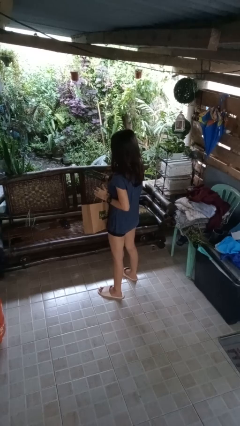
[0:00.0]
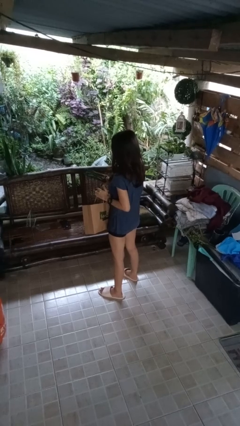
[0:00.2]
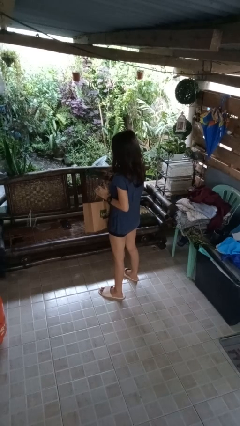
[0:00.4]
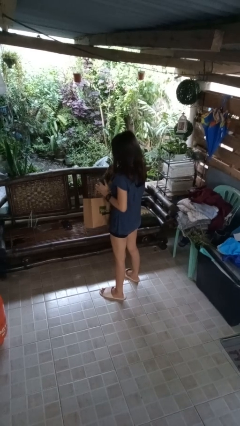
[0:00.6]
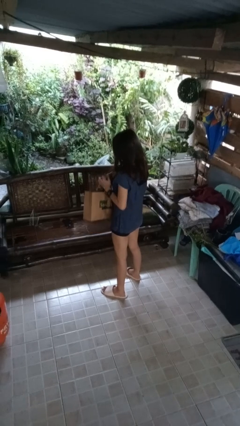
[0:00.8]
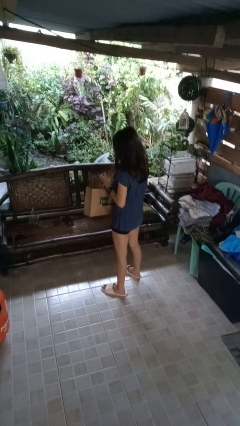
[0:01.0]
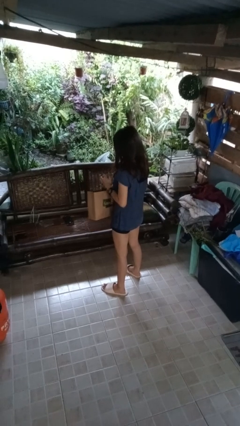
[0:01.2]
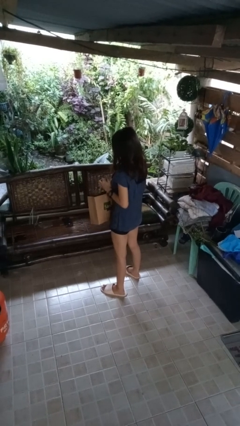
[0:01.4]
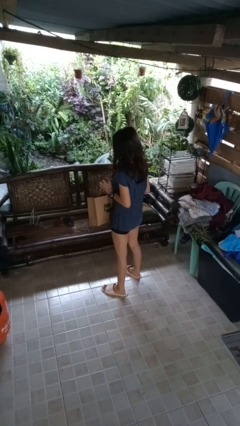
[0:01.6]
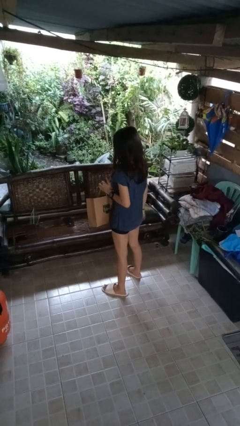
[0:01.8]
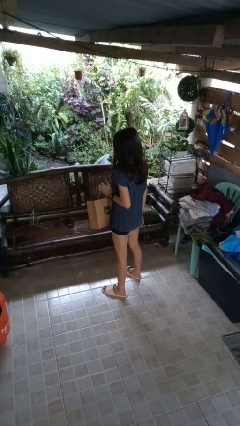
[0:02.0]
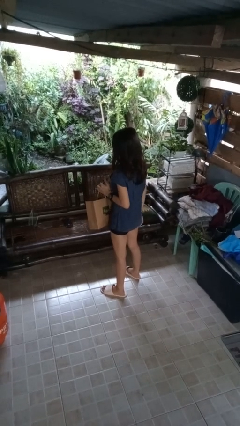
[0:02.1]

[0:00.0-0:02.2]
person puts object into bag

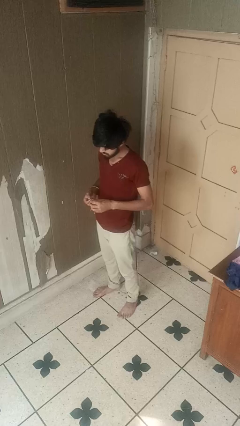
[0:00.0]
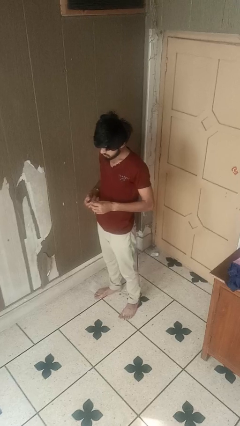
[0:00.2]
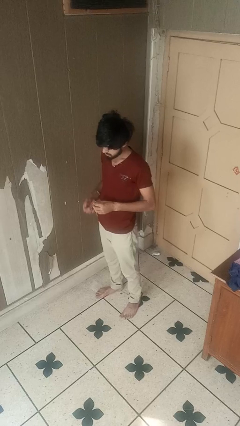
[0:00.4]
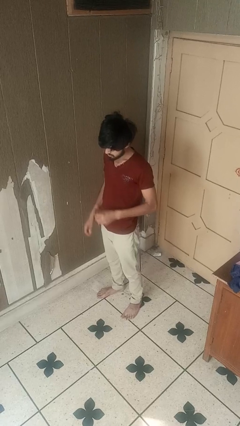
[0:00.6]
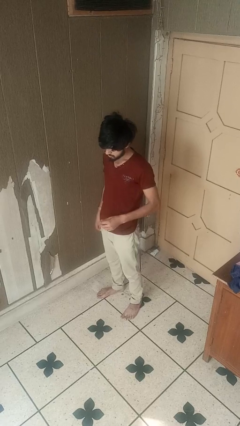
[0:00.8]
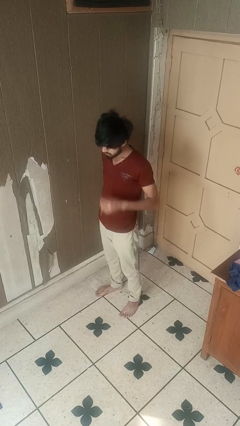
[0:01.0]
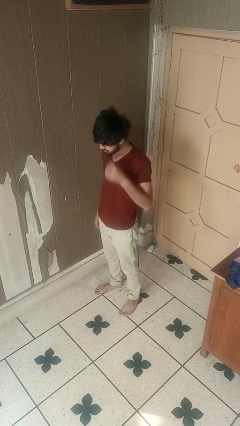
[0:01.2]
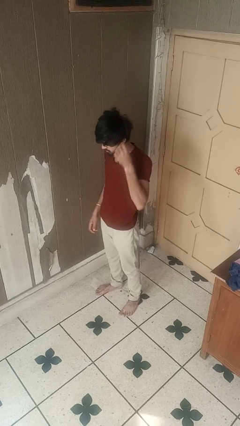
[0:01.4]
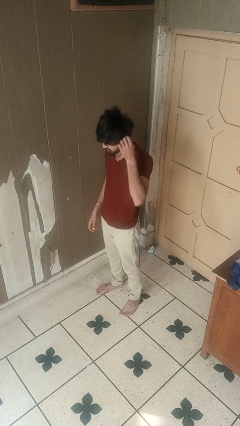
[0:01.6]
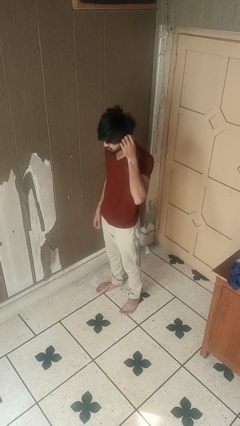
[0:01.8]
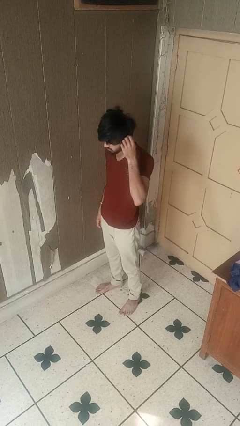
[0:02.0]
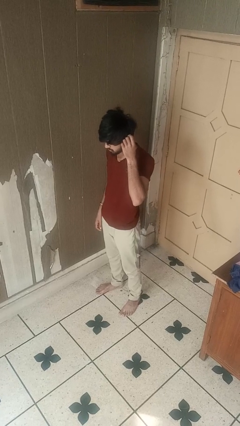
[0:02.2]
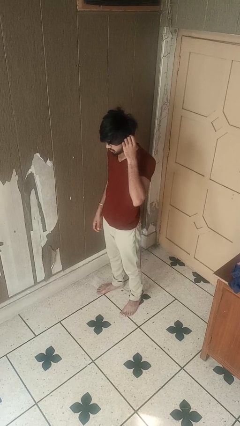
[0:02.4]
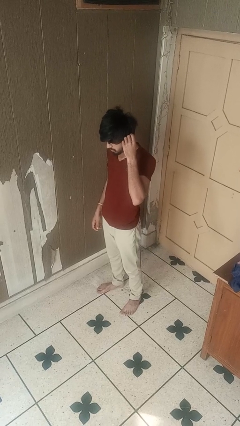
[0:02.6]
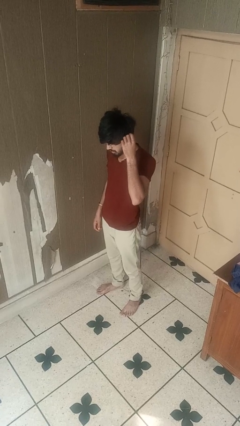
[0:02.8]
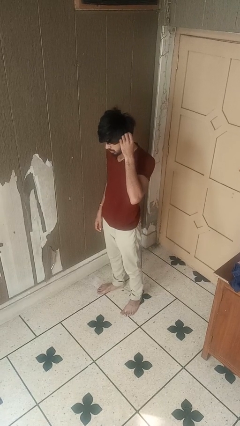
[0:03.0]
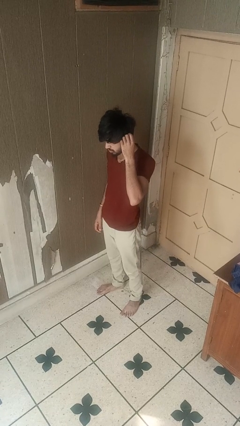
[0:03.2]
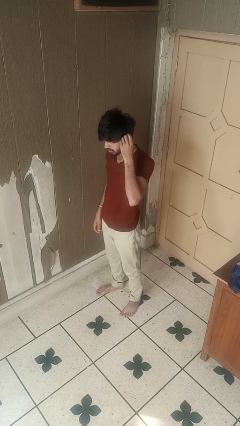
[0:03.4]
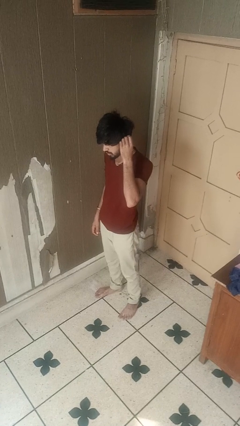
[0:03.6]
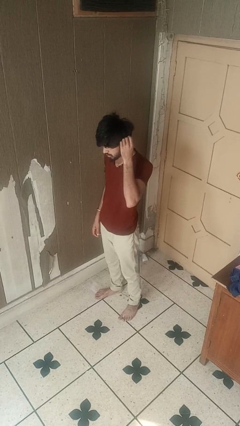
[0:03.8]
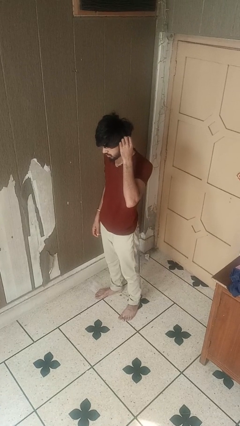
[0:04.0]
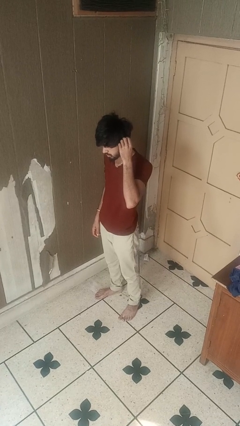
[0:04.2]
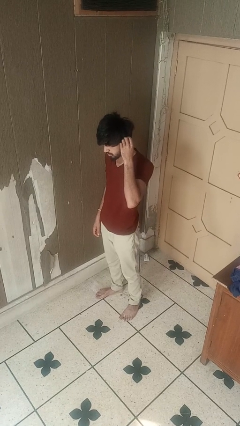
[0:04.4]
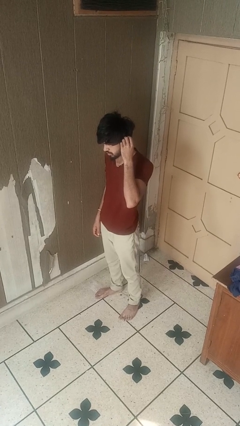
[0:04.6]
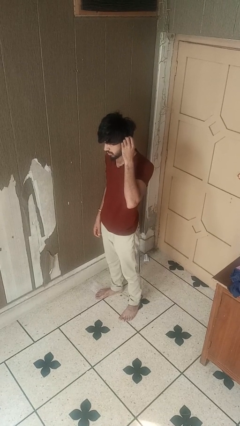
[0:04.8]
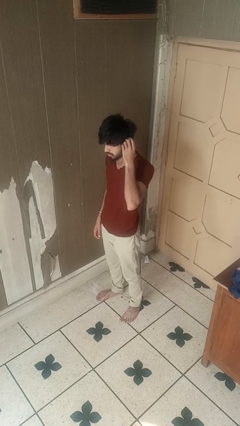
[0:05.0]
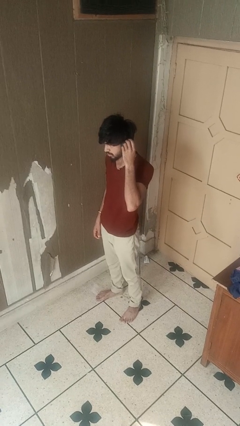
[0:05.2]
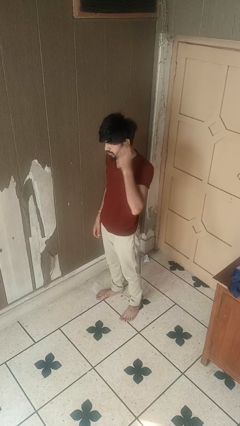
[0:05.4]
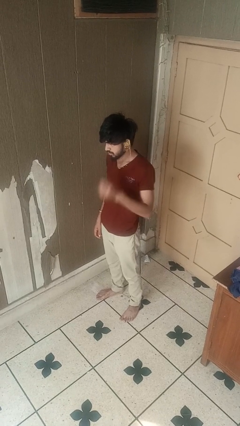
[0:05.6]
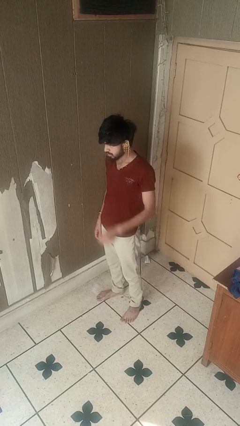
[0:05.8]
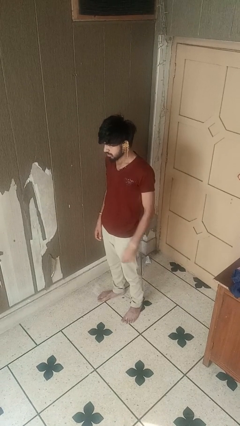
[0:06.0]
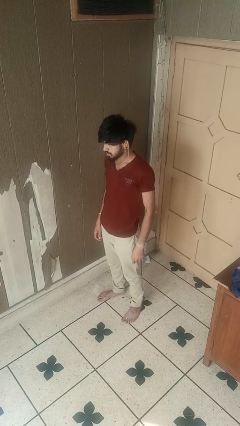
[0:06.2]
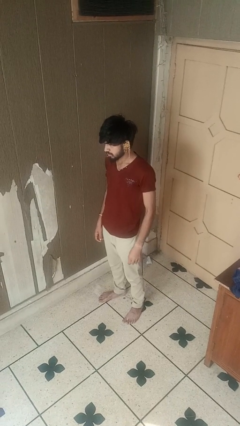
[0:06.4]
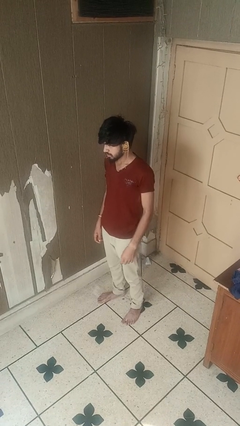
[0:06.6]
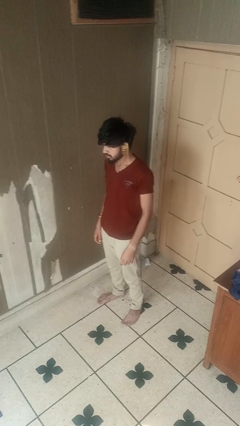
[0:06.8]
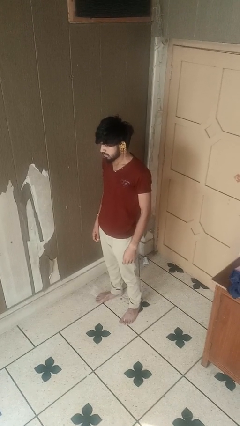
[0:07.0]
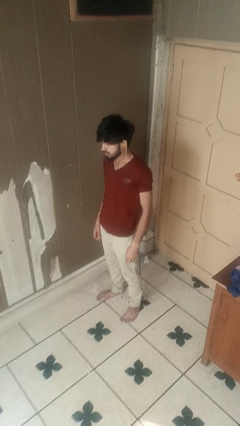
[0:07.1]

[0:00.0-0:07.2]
person puts on earrings

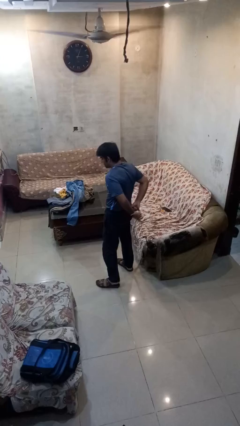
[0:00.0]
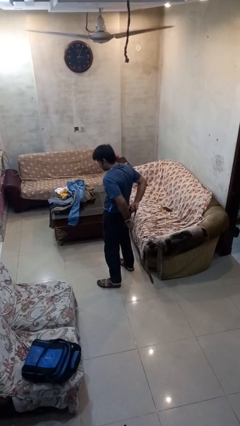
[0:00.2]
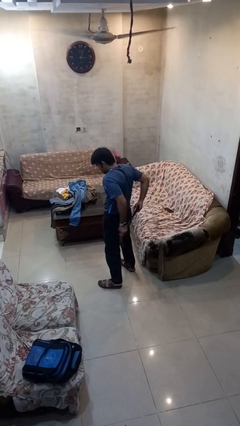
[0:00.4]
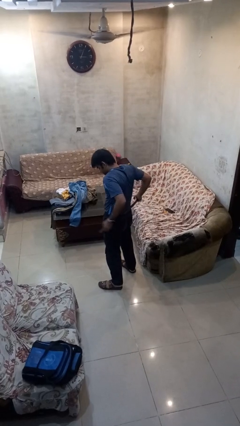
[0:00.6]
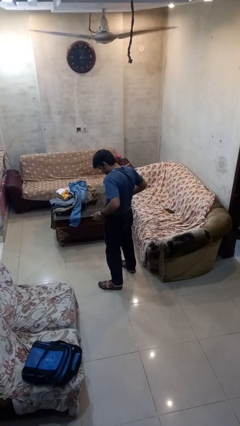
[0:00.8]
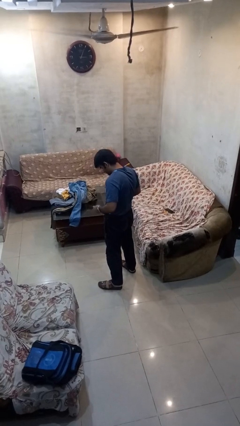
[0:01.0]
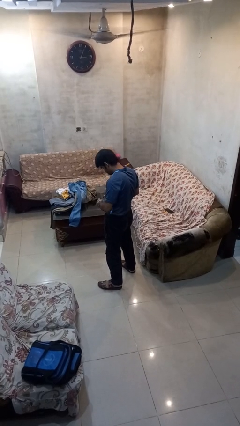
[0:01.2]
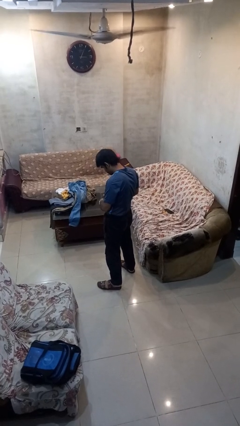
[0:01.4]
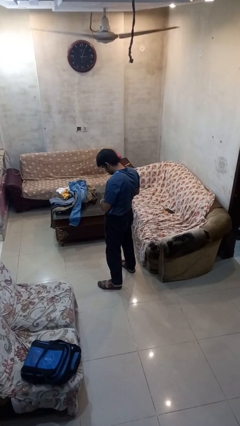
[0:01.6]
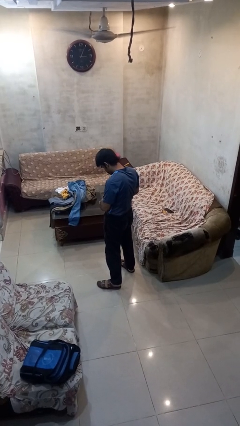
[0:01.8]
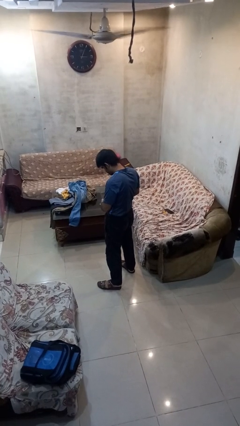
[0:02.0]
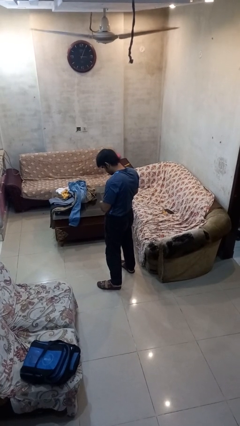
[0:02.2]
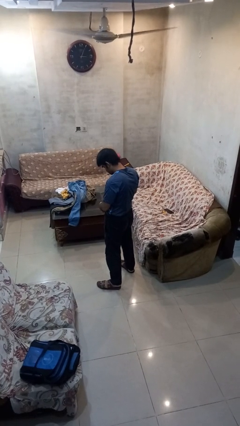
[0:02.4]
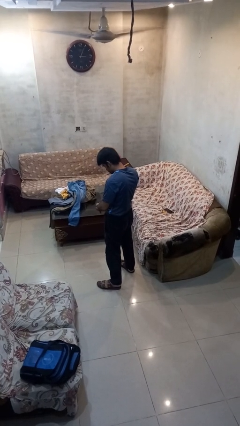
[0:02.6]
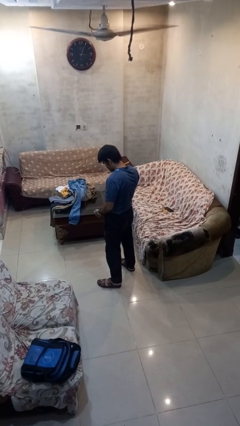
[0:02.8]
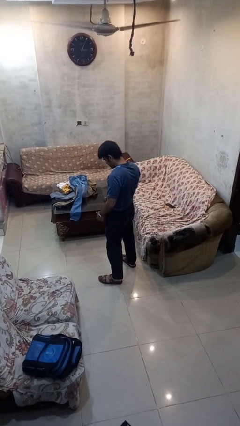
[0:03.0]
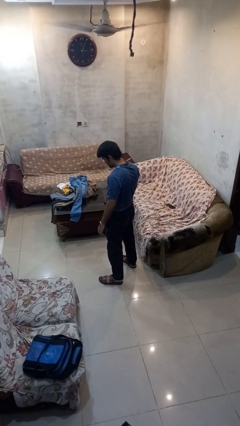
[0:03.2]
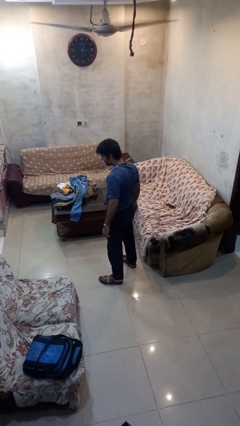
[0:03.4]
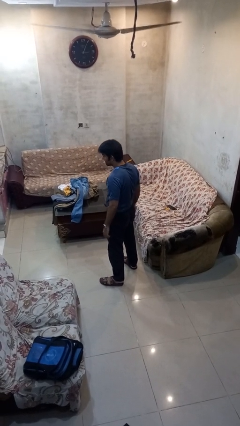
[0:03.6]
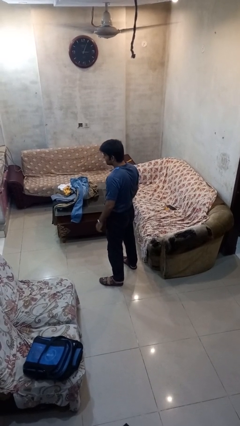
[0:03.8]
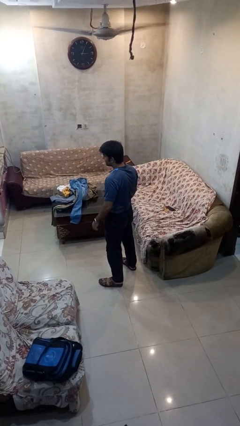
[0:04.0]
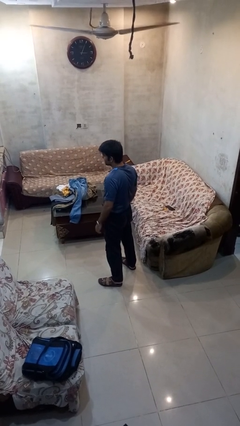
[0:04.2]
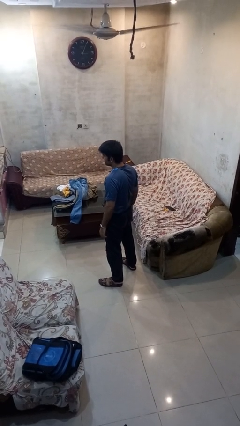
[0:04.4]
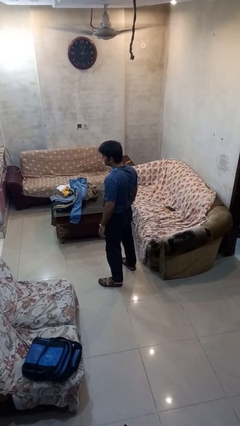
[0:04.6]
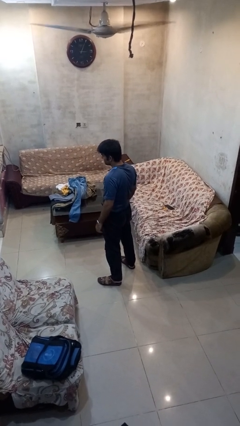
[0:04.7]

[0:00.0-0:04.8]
person puts on belt

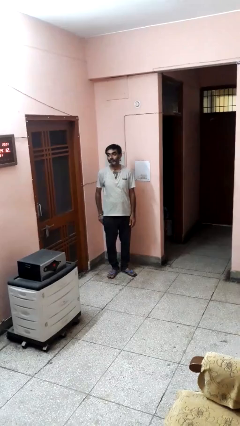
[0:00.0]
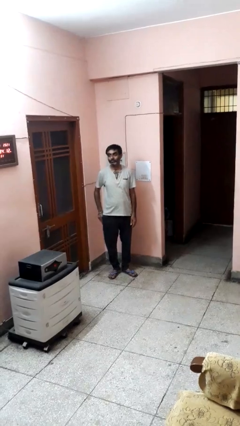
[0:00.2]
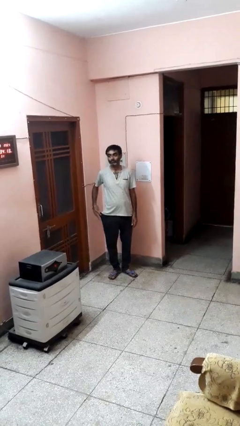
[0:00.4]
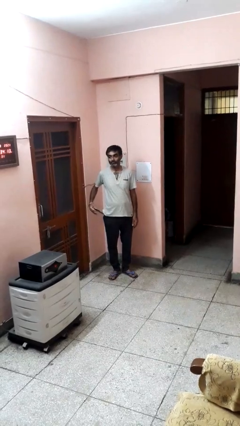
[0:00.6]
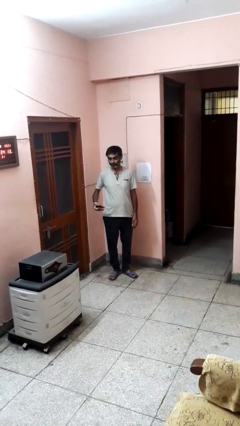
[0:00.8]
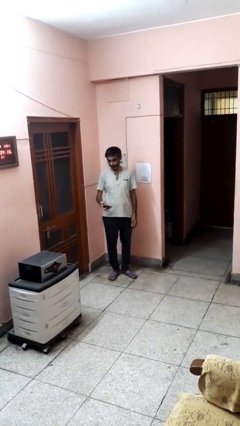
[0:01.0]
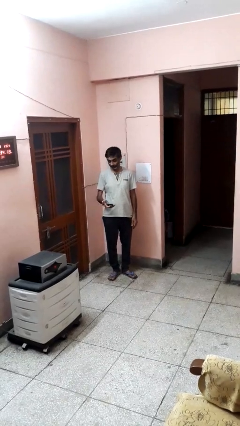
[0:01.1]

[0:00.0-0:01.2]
person takes phone from pocket

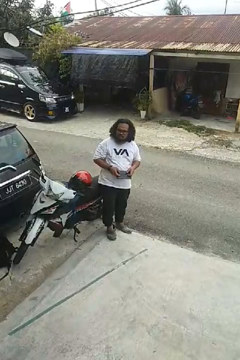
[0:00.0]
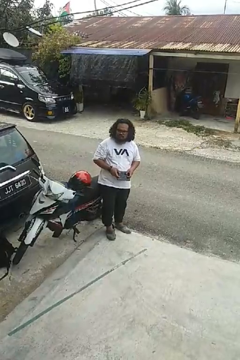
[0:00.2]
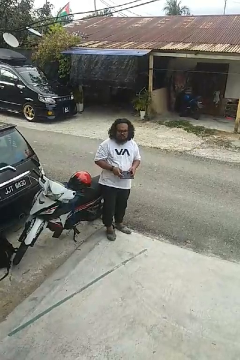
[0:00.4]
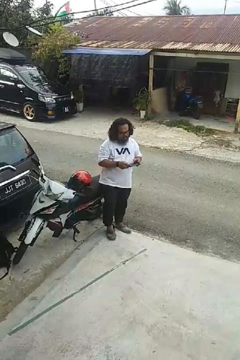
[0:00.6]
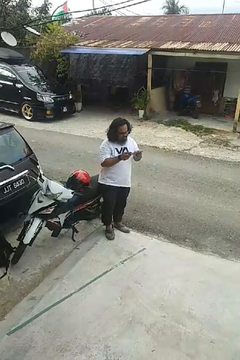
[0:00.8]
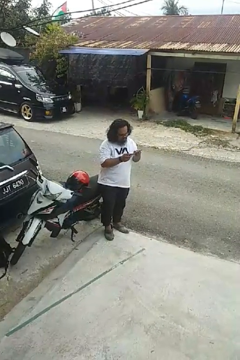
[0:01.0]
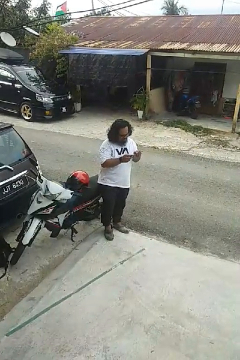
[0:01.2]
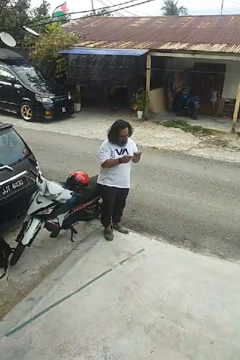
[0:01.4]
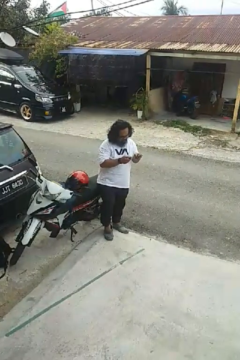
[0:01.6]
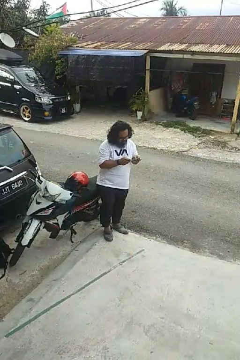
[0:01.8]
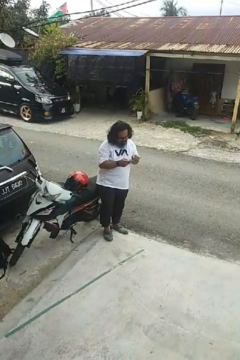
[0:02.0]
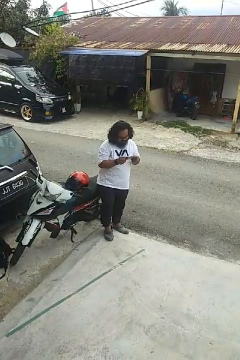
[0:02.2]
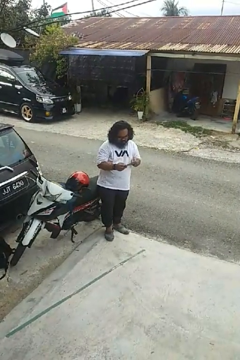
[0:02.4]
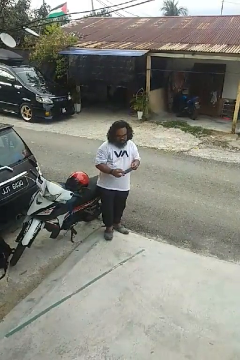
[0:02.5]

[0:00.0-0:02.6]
person interacts with handheld game
